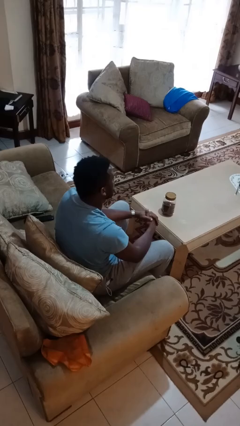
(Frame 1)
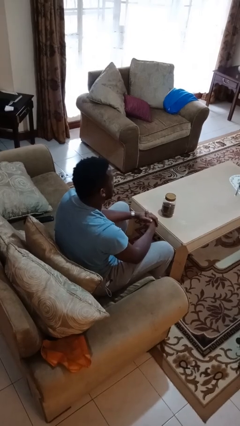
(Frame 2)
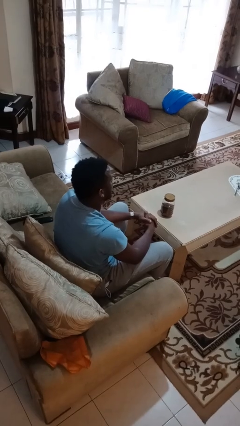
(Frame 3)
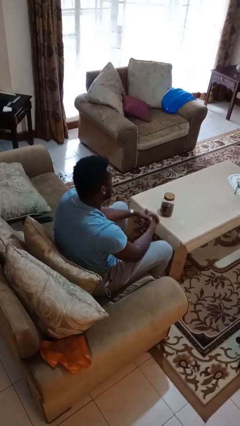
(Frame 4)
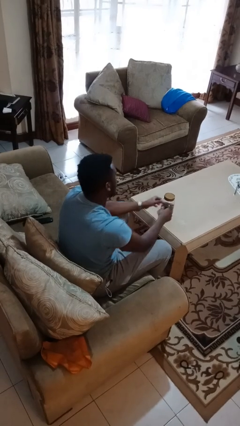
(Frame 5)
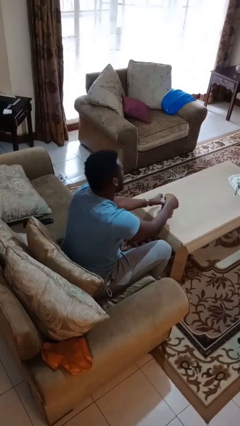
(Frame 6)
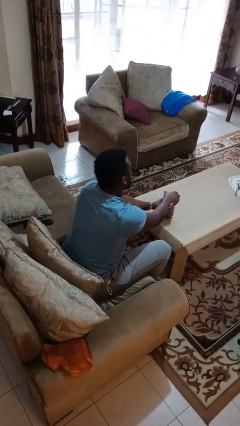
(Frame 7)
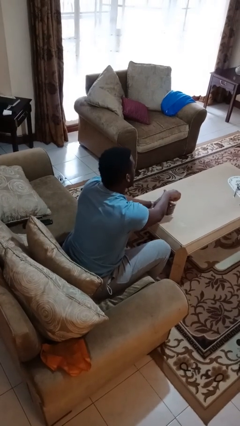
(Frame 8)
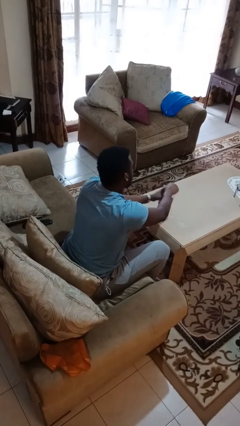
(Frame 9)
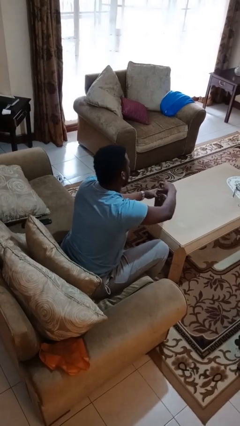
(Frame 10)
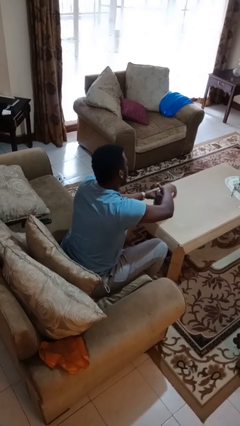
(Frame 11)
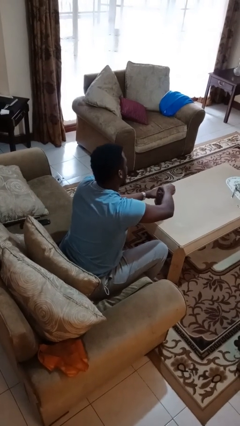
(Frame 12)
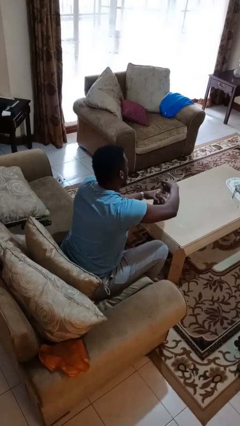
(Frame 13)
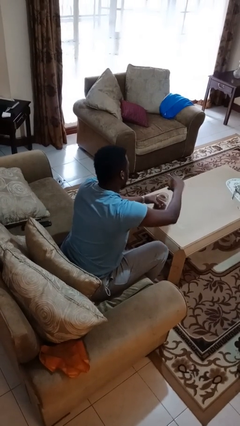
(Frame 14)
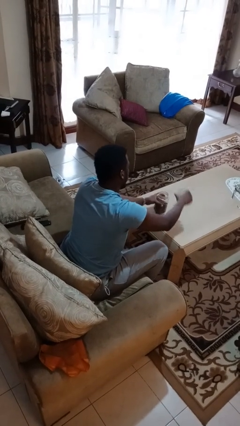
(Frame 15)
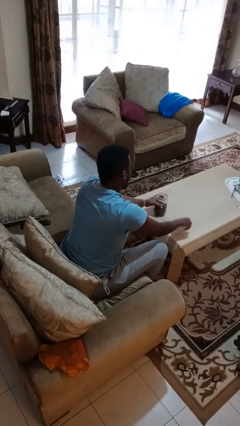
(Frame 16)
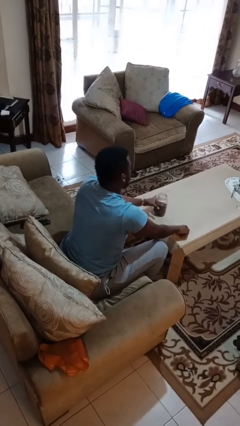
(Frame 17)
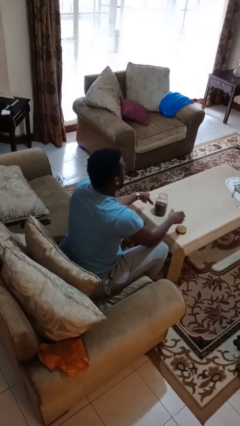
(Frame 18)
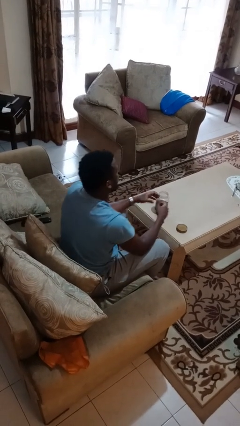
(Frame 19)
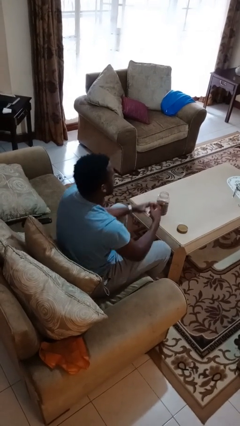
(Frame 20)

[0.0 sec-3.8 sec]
person opens jar

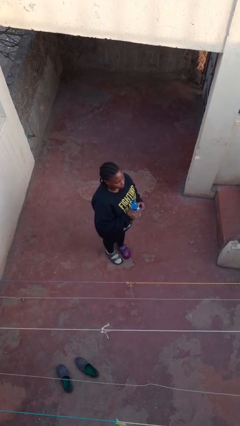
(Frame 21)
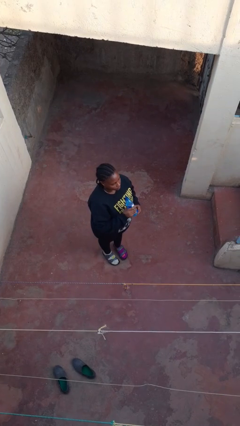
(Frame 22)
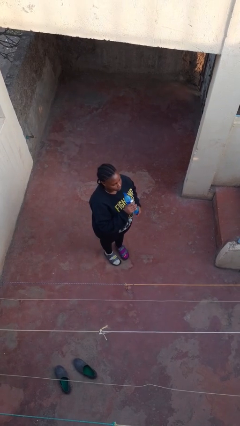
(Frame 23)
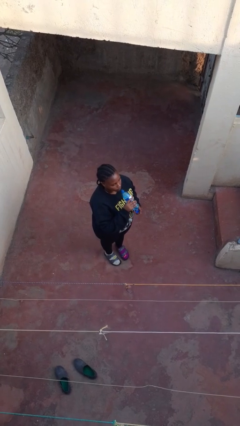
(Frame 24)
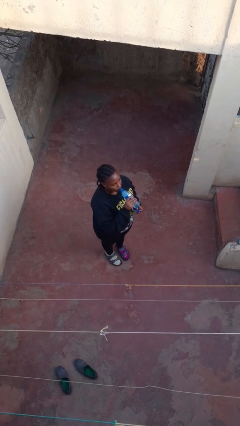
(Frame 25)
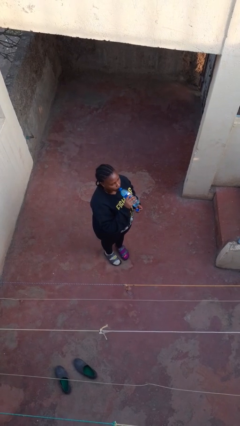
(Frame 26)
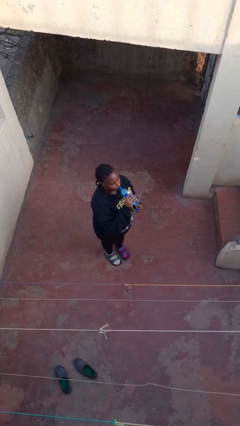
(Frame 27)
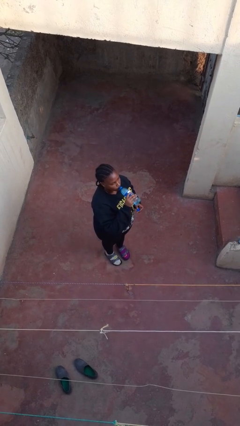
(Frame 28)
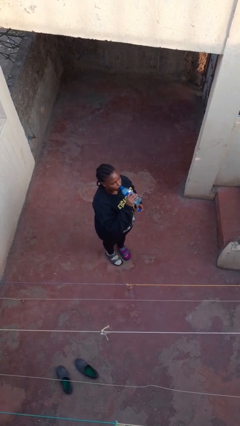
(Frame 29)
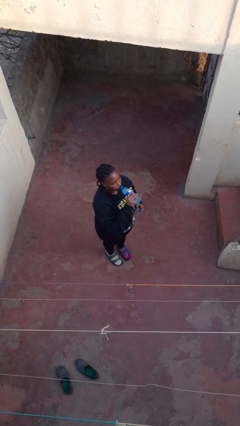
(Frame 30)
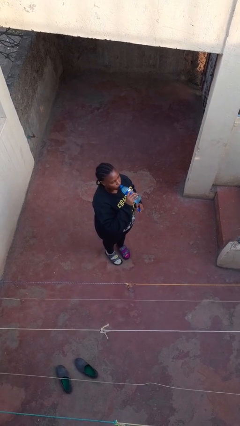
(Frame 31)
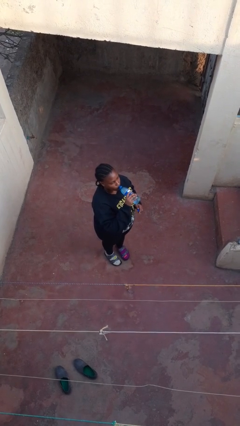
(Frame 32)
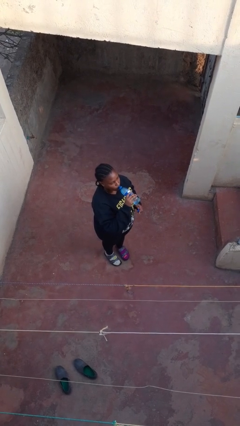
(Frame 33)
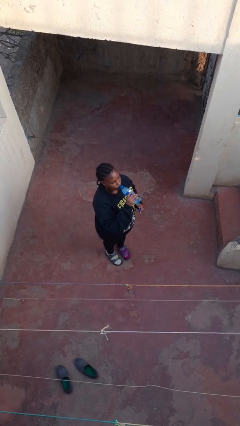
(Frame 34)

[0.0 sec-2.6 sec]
person drinks from bottle

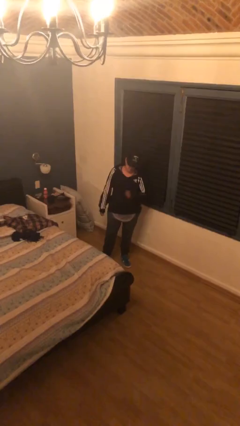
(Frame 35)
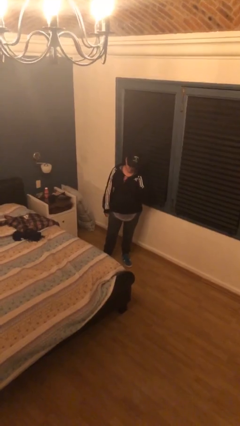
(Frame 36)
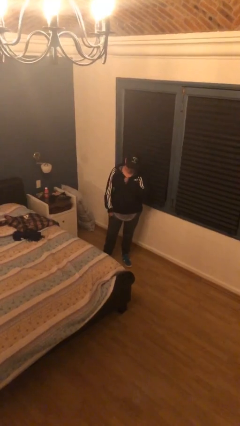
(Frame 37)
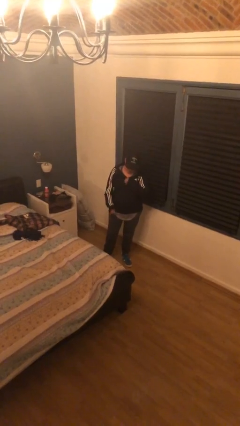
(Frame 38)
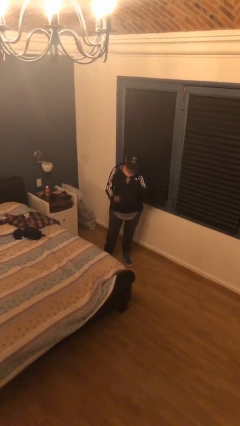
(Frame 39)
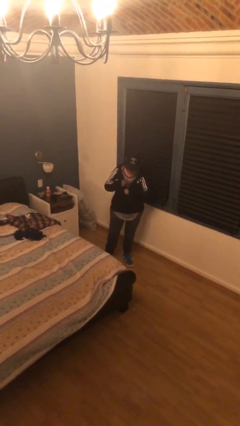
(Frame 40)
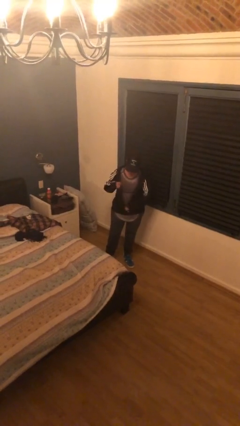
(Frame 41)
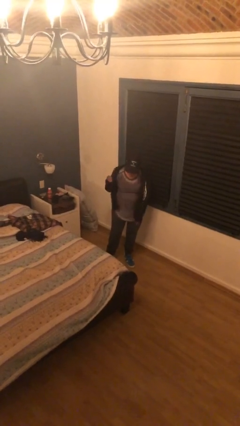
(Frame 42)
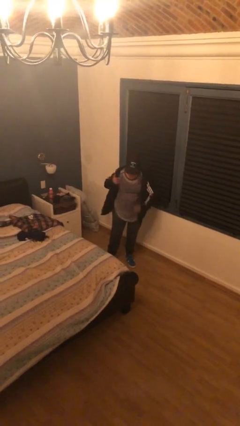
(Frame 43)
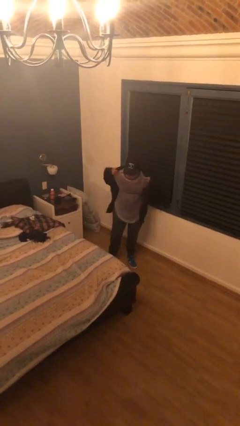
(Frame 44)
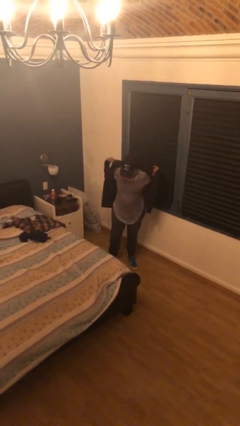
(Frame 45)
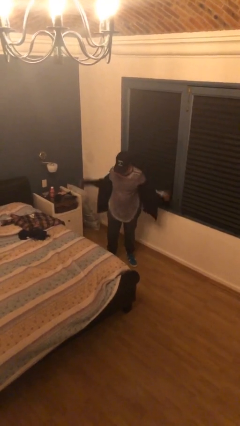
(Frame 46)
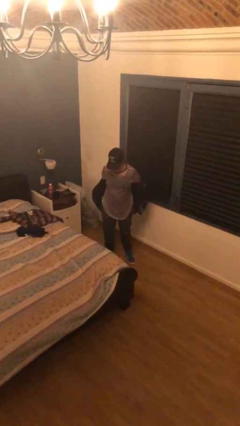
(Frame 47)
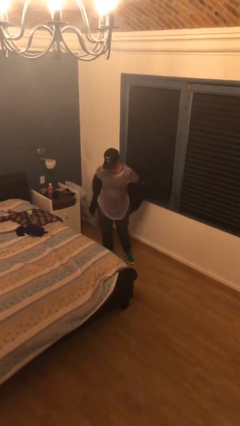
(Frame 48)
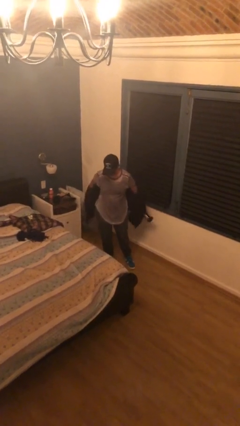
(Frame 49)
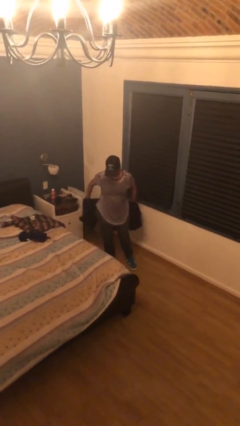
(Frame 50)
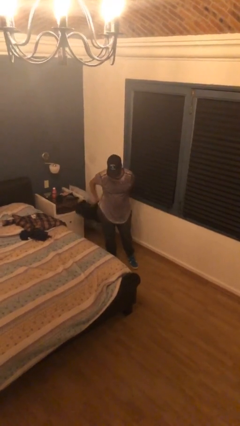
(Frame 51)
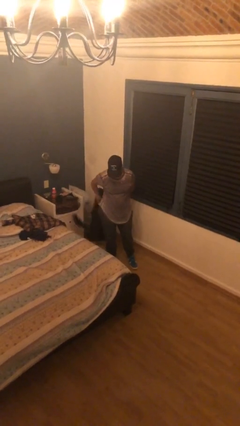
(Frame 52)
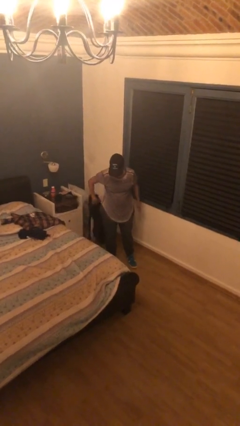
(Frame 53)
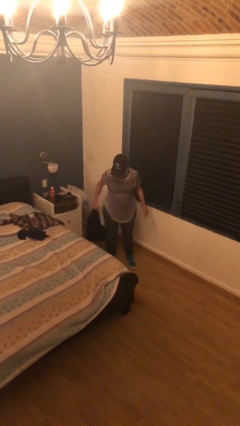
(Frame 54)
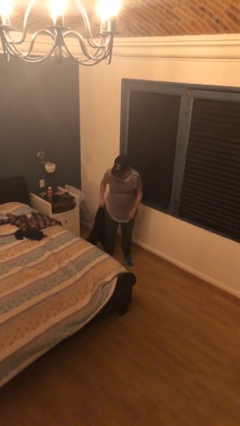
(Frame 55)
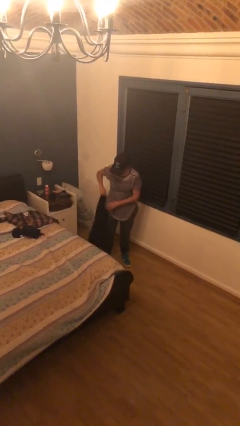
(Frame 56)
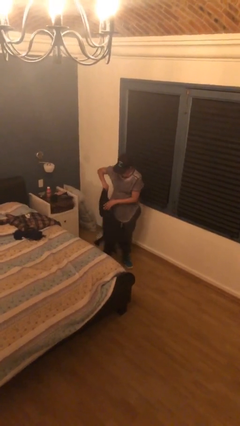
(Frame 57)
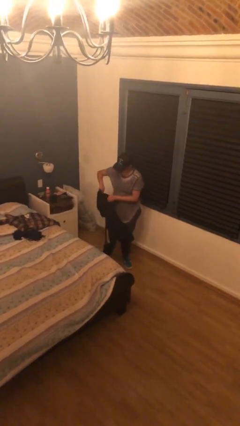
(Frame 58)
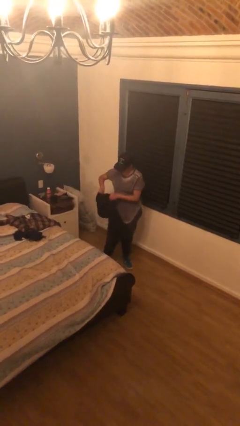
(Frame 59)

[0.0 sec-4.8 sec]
person unzips jacket

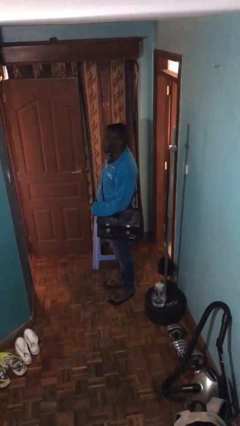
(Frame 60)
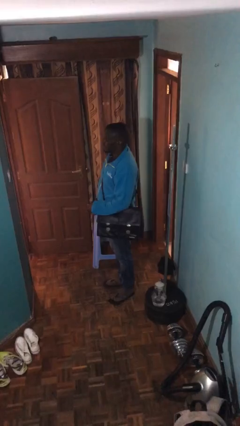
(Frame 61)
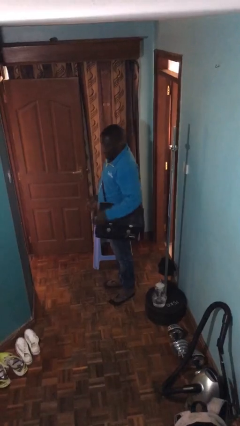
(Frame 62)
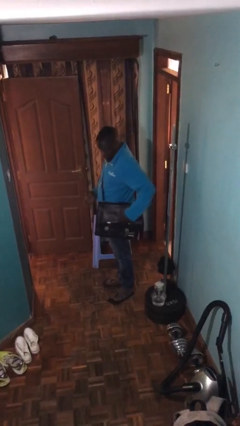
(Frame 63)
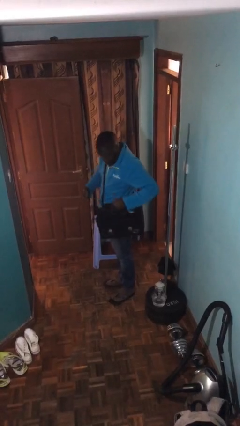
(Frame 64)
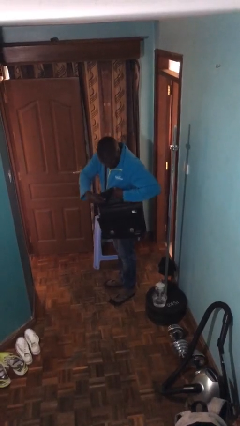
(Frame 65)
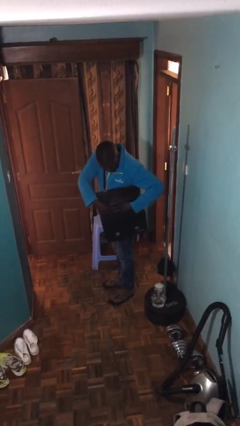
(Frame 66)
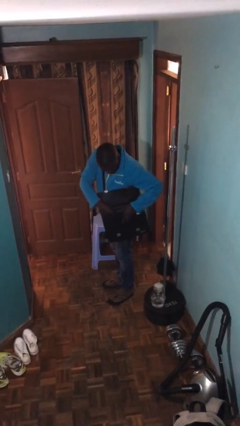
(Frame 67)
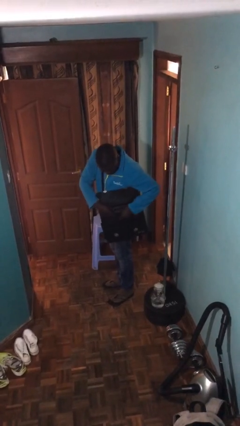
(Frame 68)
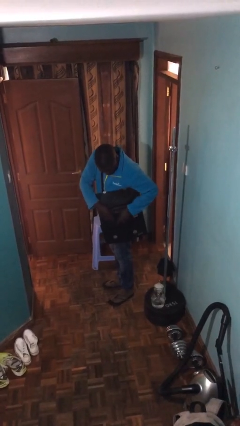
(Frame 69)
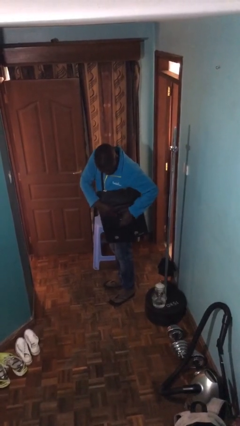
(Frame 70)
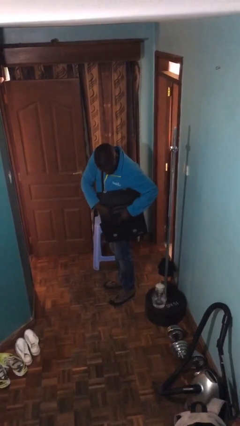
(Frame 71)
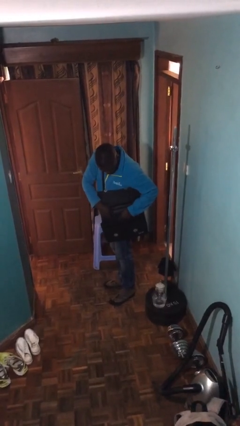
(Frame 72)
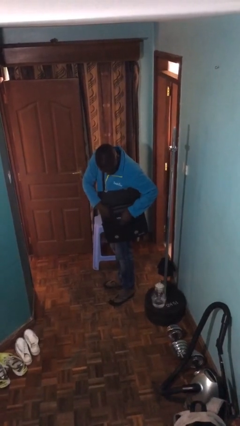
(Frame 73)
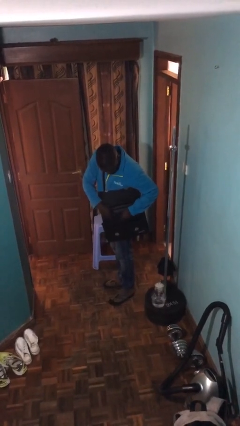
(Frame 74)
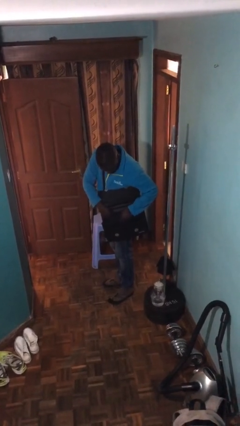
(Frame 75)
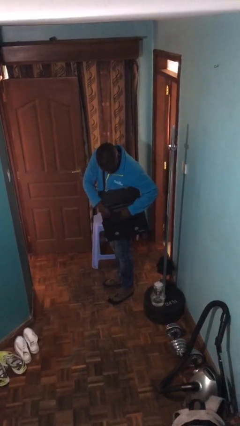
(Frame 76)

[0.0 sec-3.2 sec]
person searches in purse

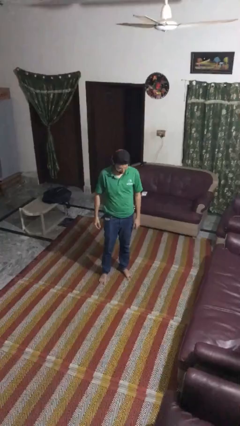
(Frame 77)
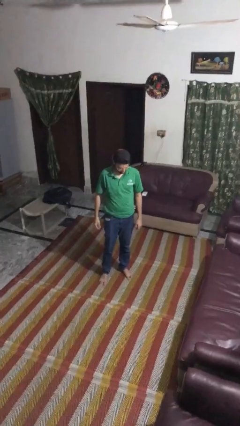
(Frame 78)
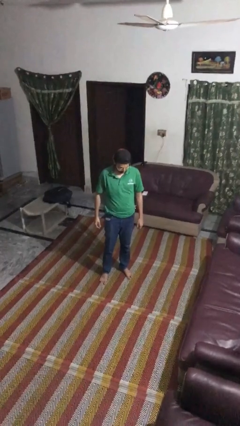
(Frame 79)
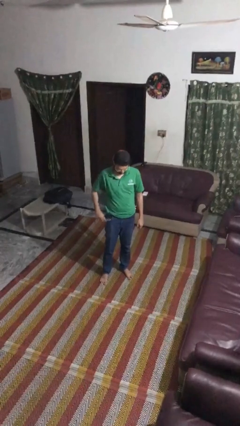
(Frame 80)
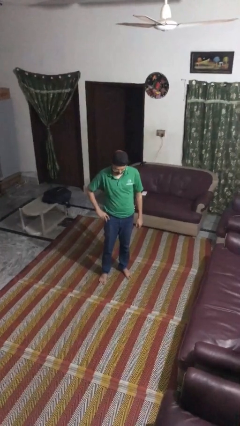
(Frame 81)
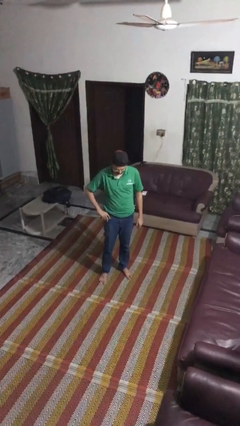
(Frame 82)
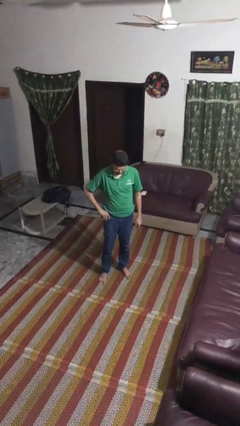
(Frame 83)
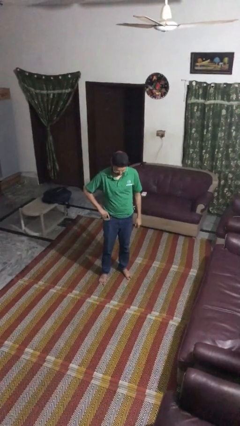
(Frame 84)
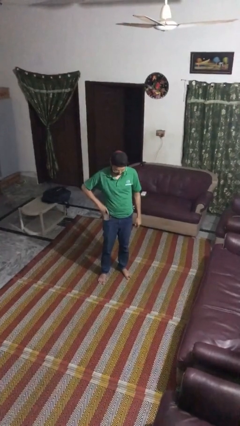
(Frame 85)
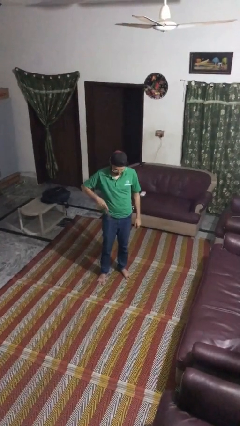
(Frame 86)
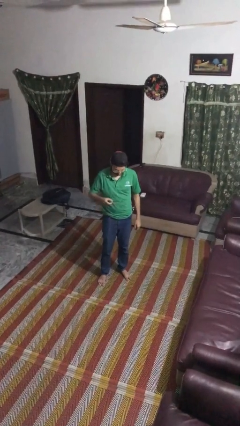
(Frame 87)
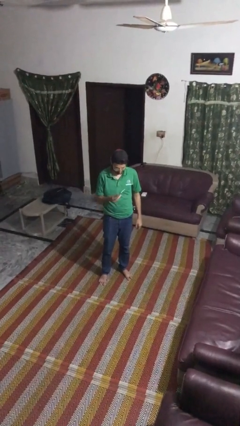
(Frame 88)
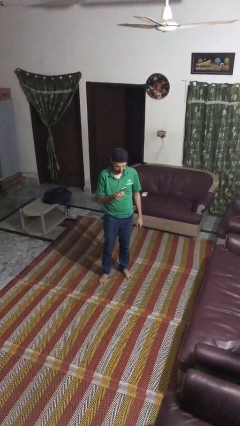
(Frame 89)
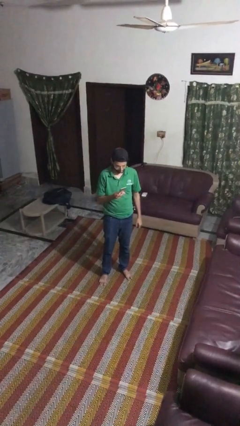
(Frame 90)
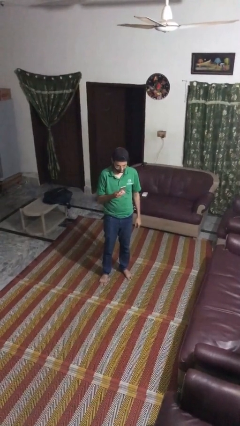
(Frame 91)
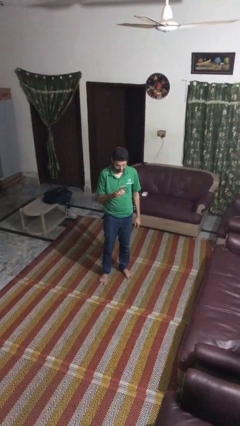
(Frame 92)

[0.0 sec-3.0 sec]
person takes phone from pocket
